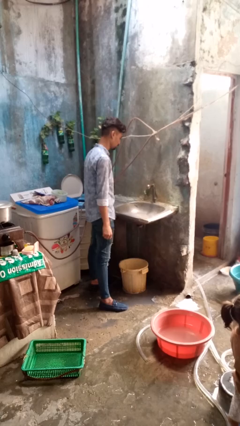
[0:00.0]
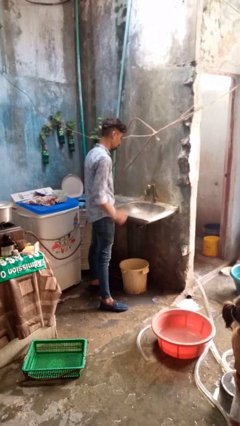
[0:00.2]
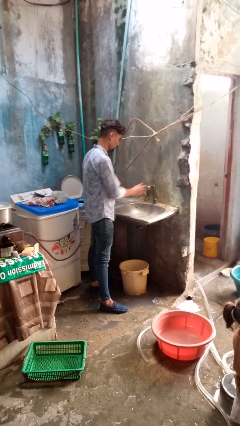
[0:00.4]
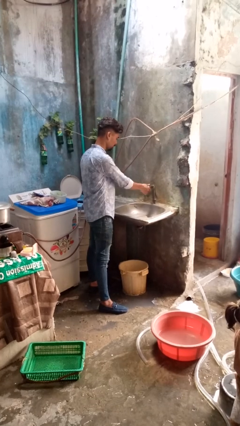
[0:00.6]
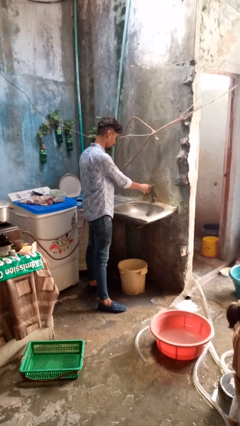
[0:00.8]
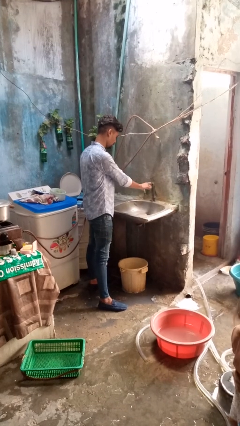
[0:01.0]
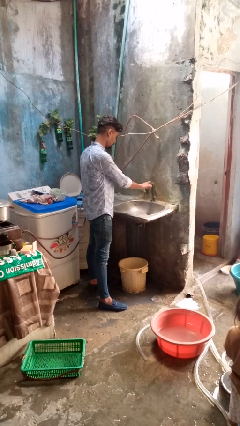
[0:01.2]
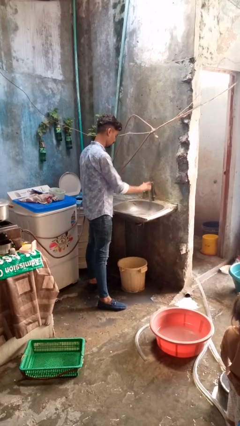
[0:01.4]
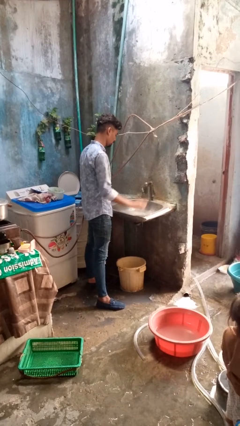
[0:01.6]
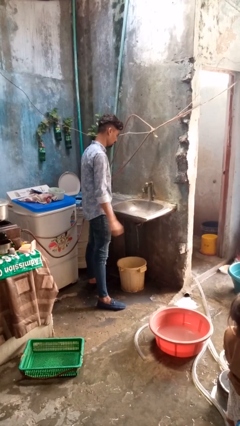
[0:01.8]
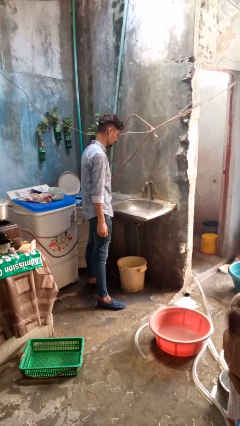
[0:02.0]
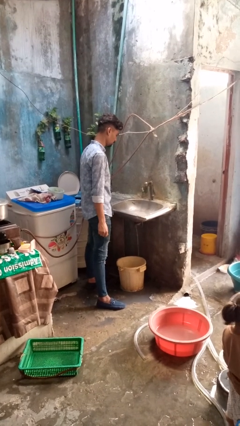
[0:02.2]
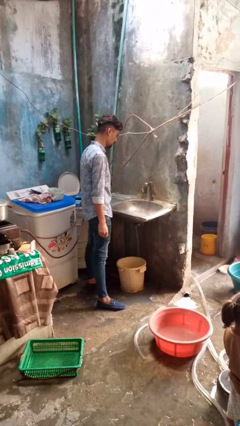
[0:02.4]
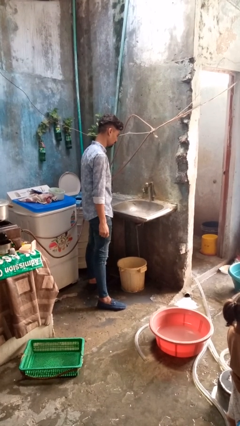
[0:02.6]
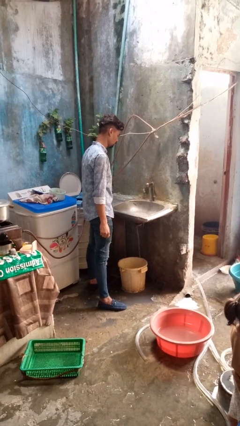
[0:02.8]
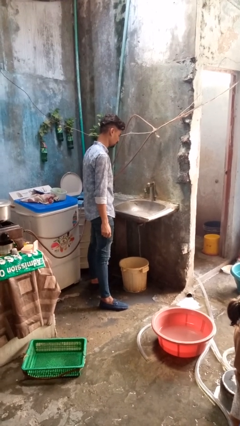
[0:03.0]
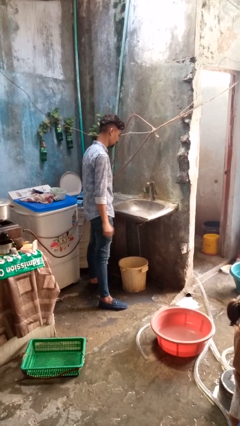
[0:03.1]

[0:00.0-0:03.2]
person turns on faucet

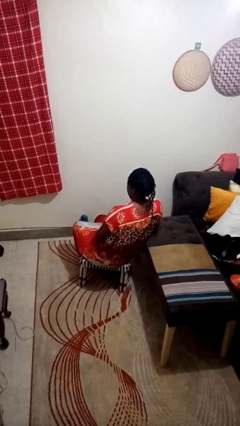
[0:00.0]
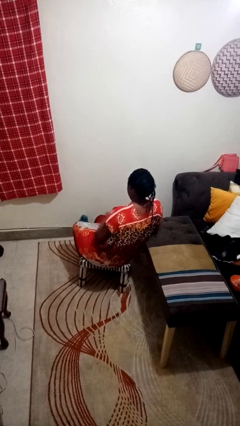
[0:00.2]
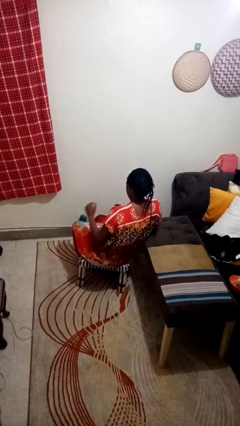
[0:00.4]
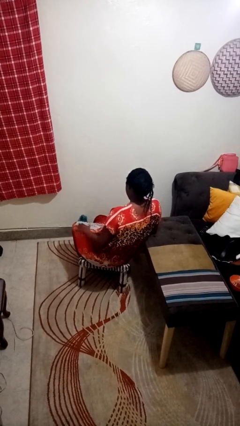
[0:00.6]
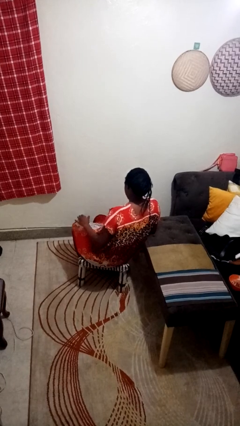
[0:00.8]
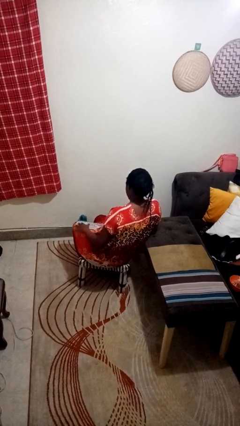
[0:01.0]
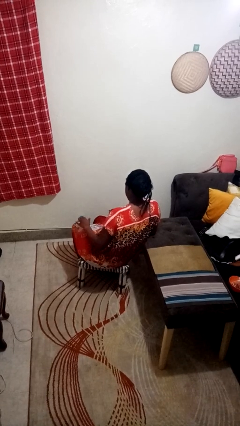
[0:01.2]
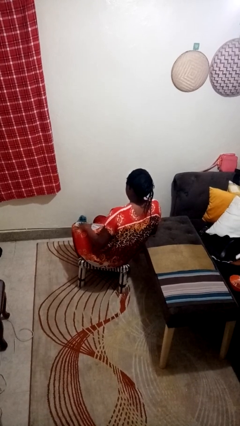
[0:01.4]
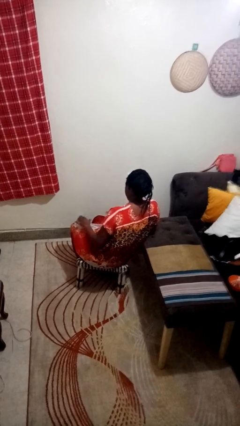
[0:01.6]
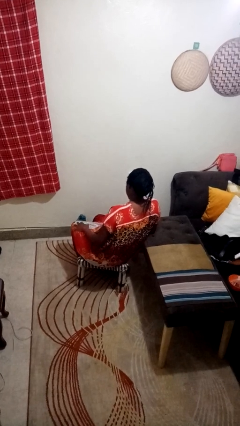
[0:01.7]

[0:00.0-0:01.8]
person slaps hands on thighs

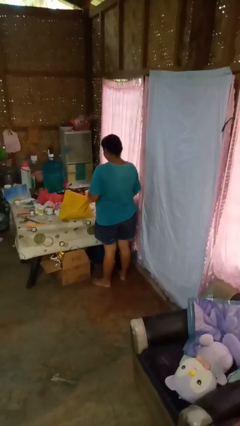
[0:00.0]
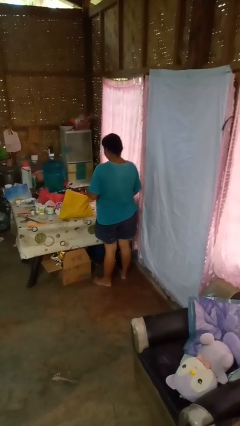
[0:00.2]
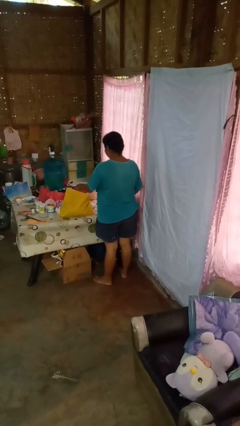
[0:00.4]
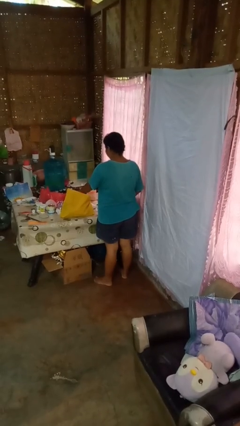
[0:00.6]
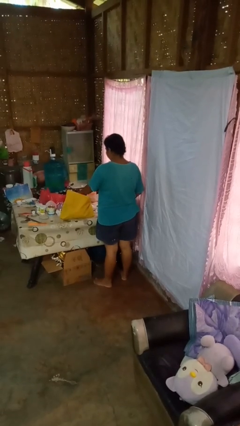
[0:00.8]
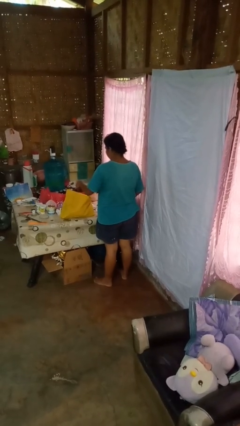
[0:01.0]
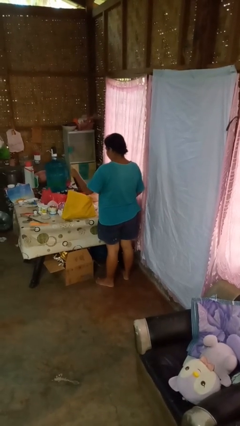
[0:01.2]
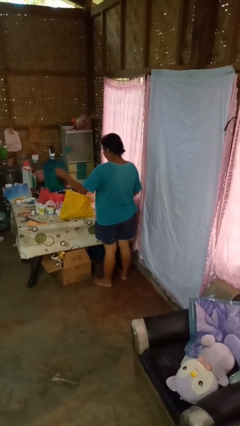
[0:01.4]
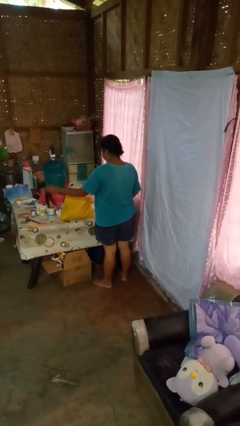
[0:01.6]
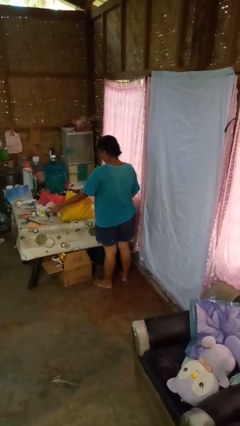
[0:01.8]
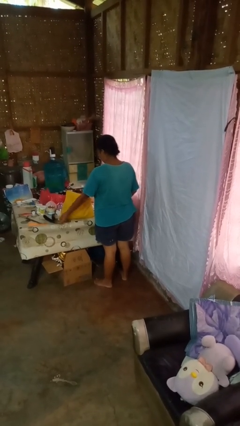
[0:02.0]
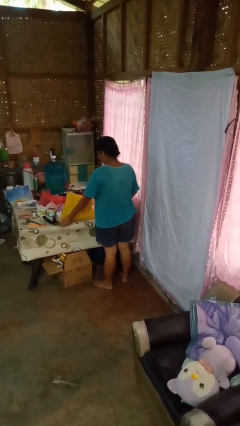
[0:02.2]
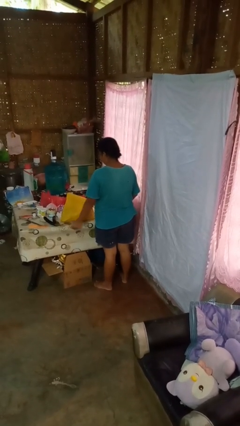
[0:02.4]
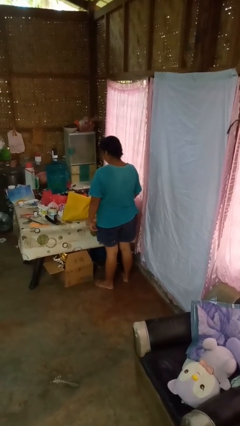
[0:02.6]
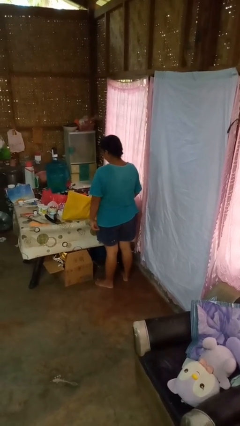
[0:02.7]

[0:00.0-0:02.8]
person takes object from bag

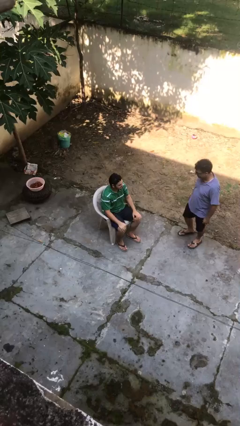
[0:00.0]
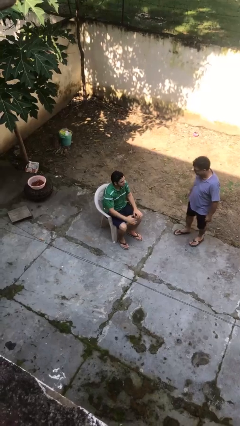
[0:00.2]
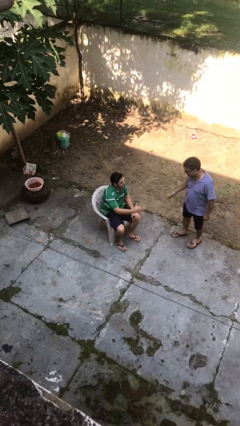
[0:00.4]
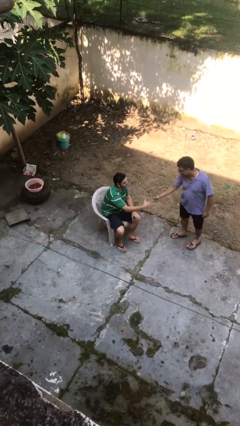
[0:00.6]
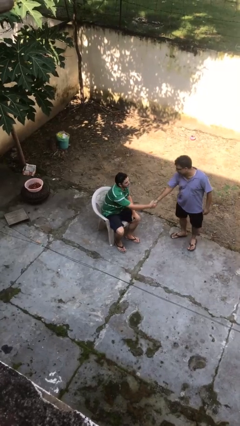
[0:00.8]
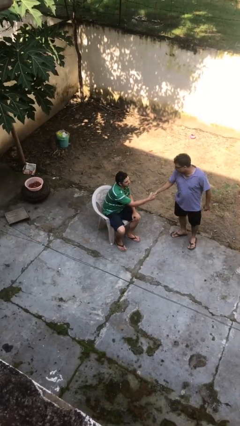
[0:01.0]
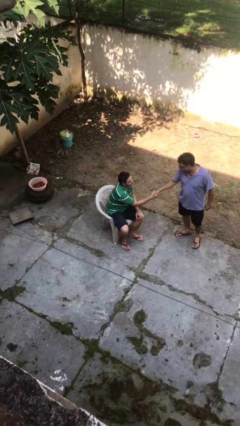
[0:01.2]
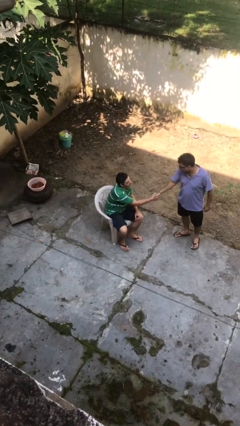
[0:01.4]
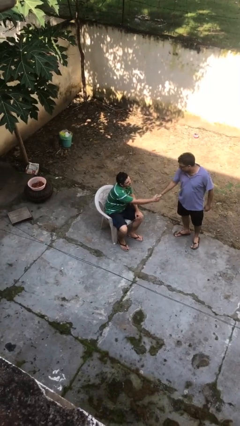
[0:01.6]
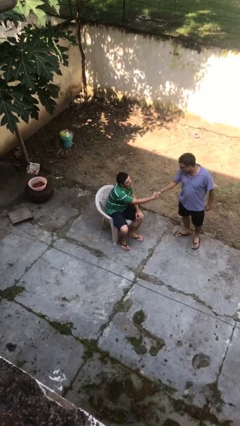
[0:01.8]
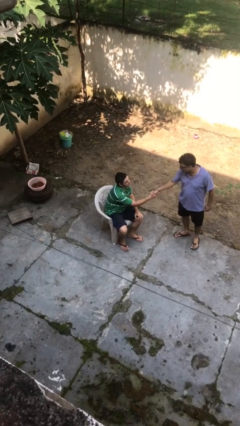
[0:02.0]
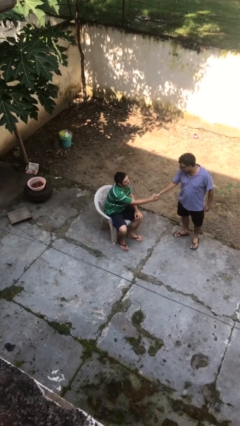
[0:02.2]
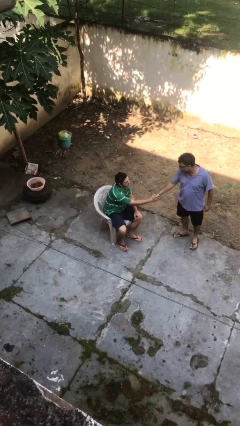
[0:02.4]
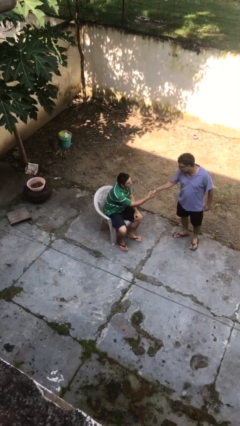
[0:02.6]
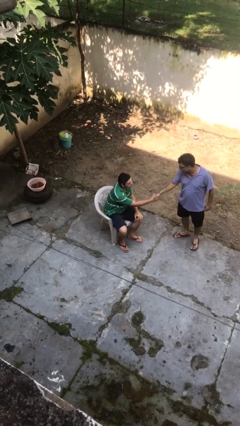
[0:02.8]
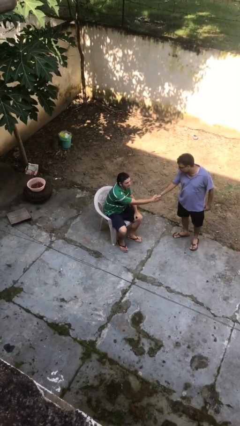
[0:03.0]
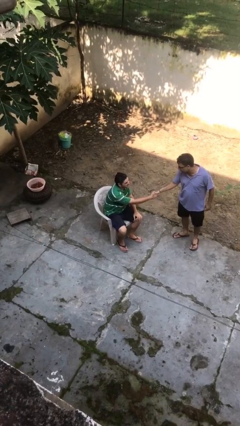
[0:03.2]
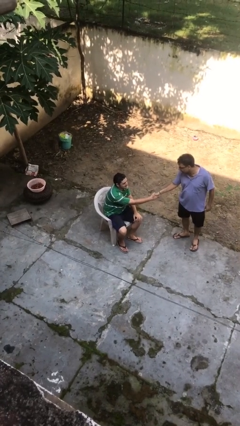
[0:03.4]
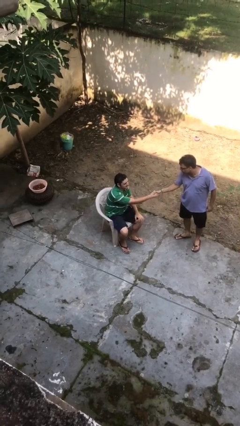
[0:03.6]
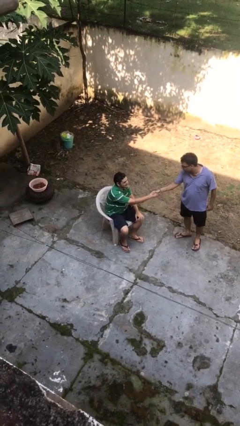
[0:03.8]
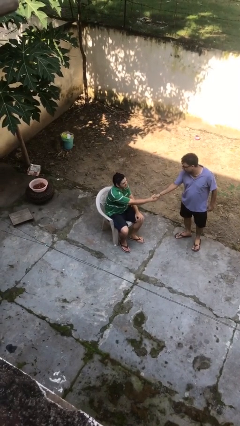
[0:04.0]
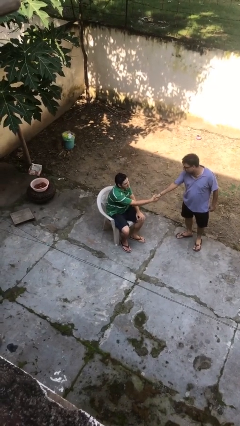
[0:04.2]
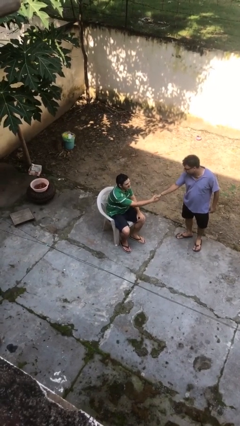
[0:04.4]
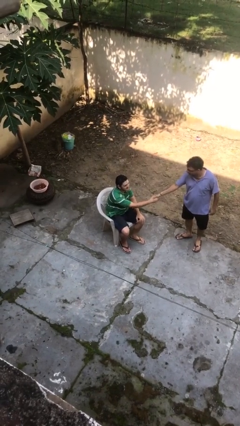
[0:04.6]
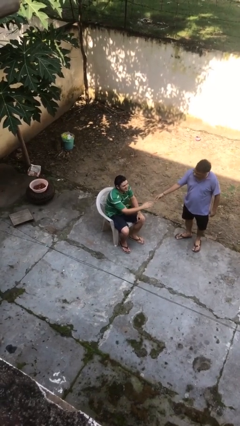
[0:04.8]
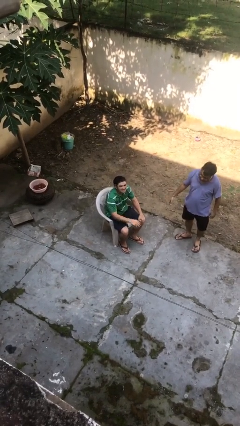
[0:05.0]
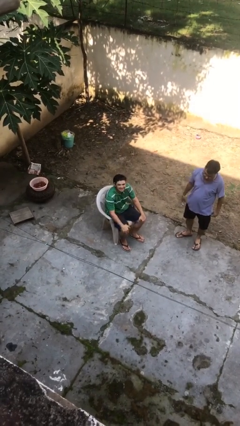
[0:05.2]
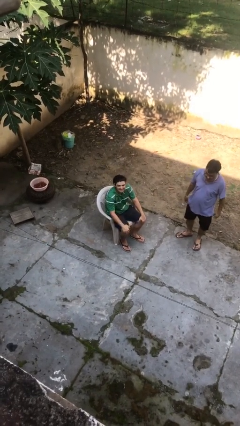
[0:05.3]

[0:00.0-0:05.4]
person shakes hand

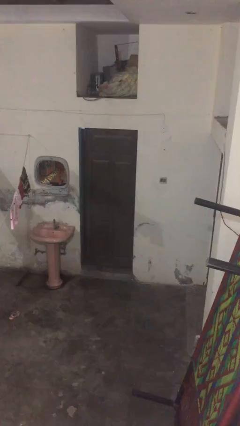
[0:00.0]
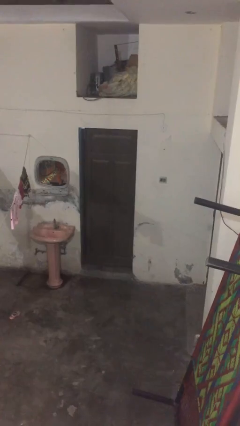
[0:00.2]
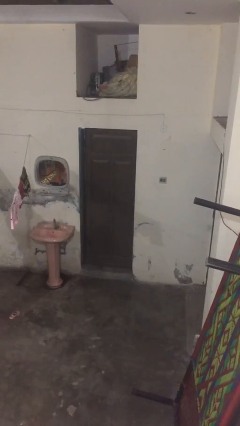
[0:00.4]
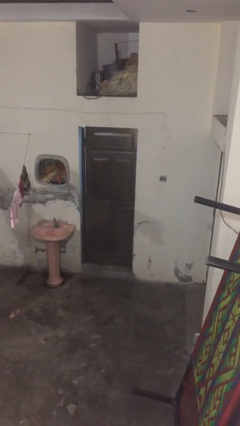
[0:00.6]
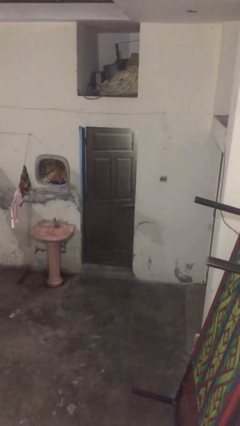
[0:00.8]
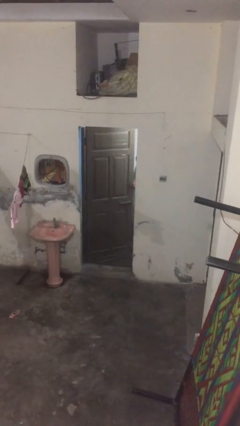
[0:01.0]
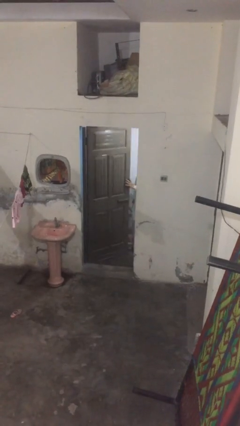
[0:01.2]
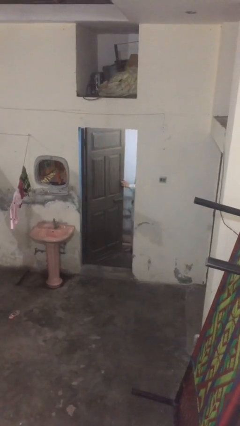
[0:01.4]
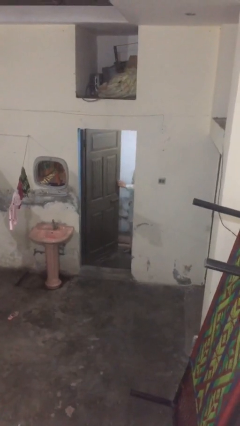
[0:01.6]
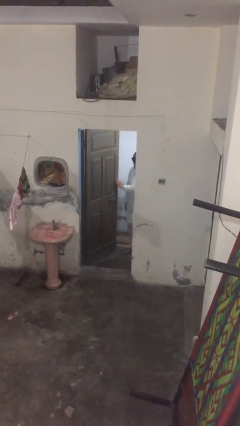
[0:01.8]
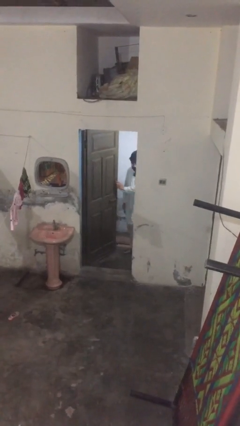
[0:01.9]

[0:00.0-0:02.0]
person opens facility door

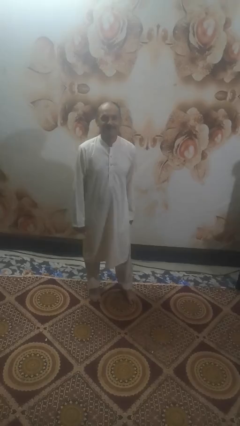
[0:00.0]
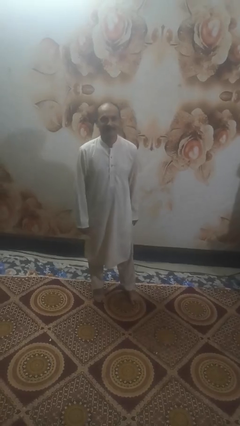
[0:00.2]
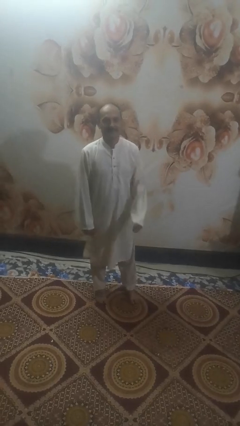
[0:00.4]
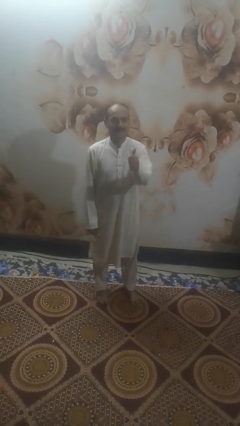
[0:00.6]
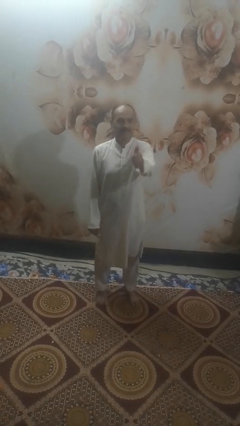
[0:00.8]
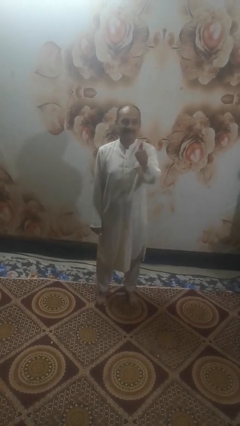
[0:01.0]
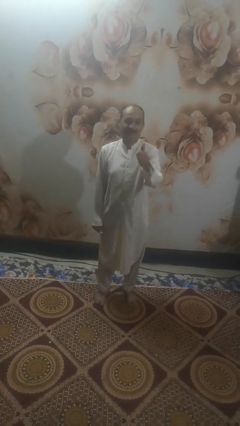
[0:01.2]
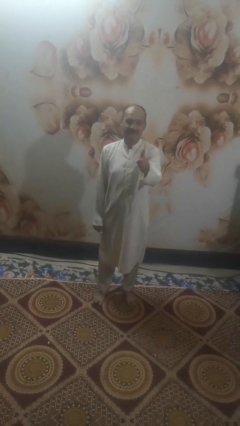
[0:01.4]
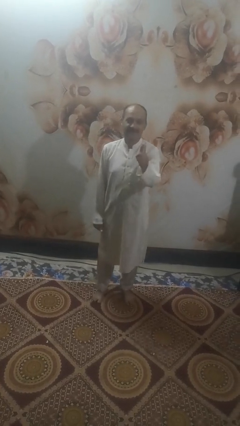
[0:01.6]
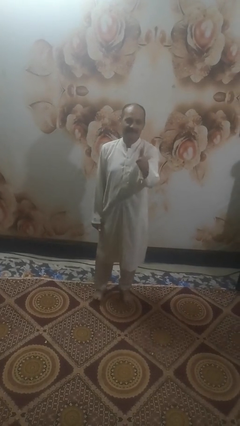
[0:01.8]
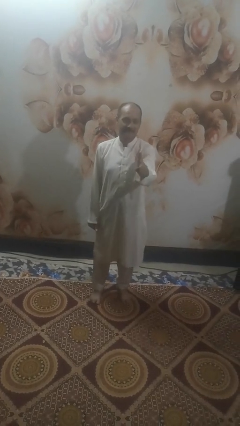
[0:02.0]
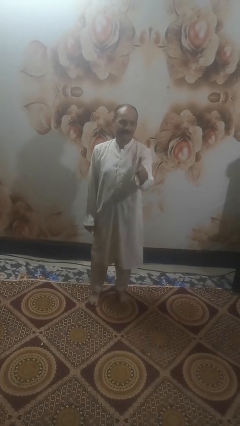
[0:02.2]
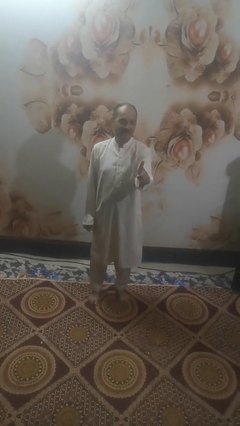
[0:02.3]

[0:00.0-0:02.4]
person gestures thumbs up
